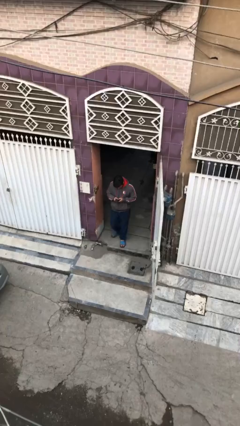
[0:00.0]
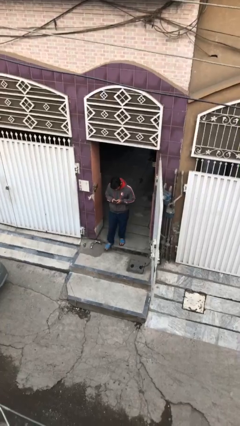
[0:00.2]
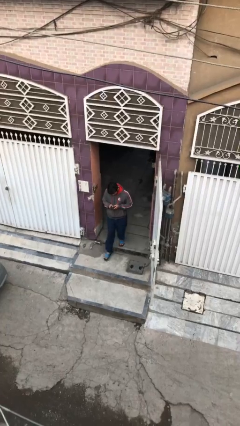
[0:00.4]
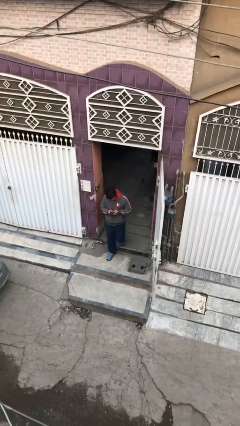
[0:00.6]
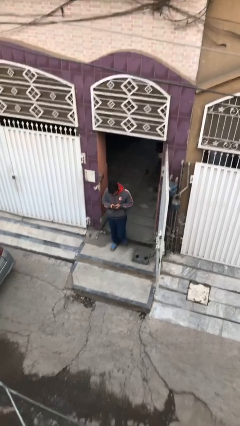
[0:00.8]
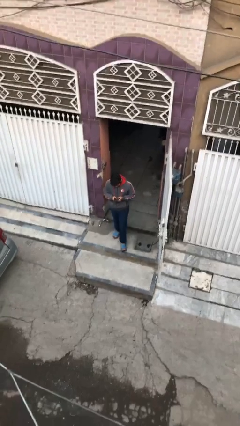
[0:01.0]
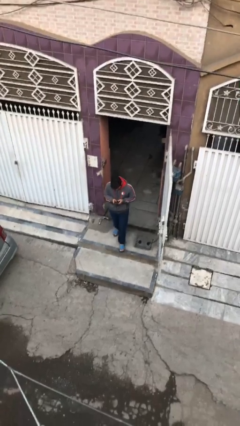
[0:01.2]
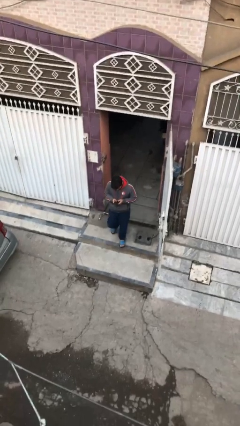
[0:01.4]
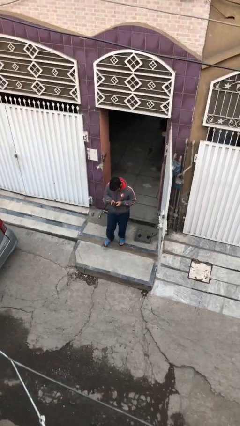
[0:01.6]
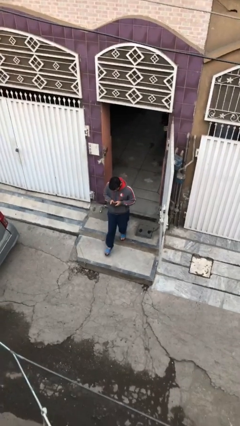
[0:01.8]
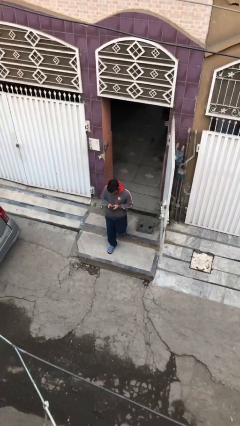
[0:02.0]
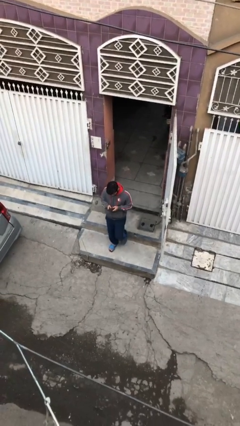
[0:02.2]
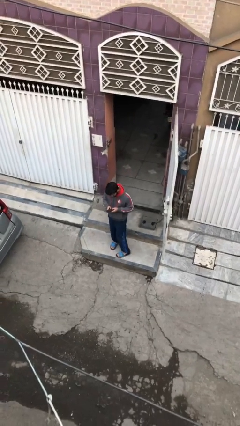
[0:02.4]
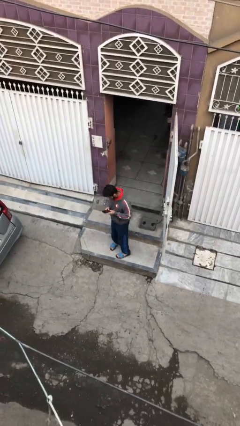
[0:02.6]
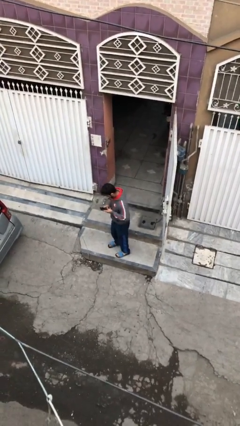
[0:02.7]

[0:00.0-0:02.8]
person enters scene through structure

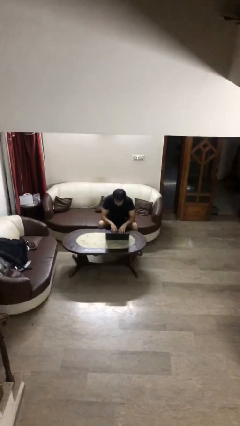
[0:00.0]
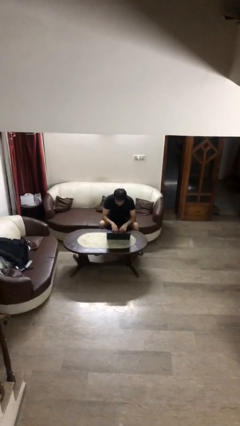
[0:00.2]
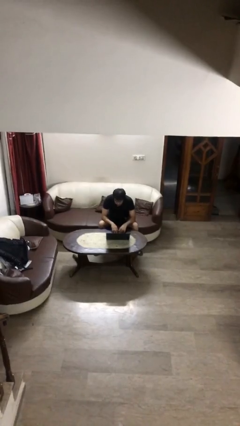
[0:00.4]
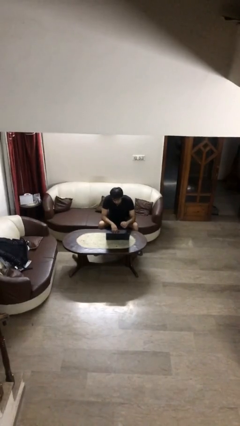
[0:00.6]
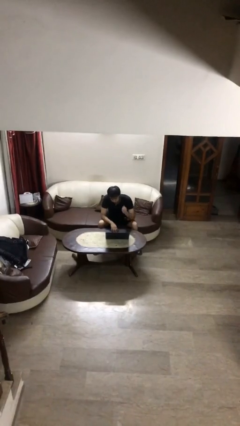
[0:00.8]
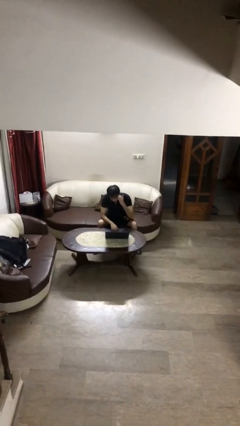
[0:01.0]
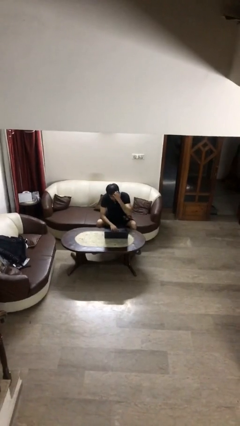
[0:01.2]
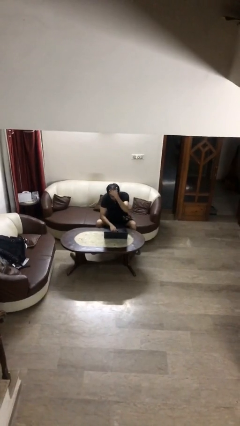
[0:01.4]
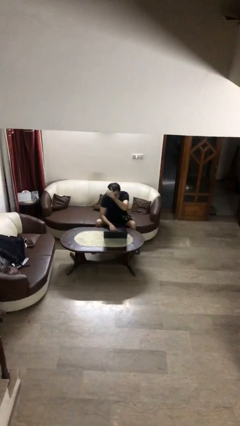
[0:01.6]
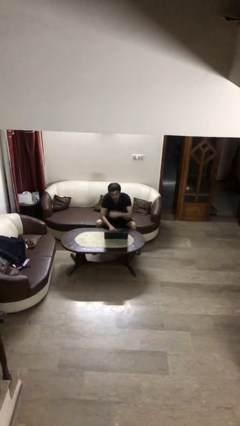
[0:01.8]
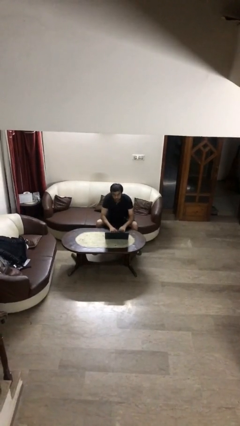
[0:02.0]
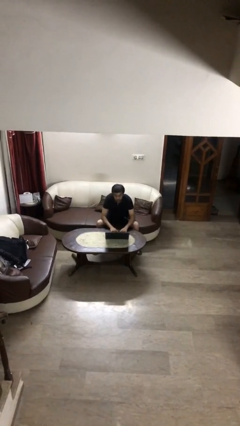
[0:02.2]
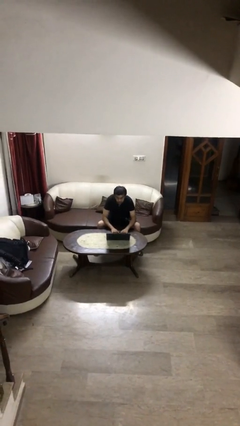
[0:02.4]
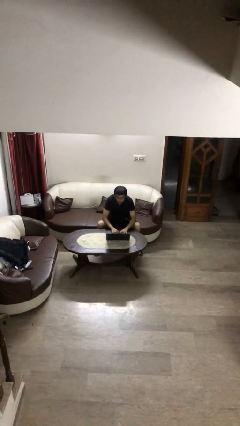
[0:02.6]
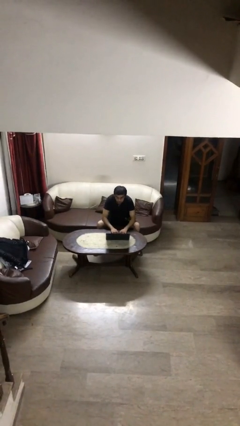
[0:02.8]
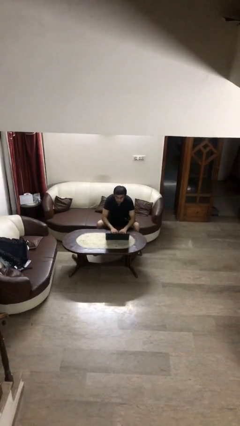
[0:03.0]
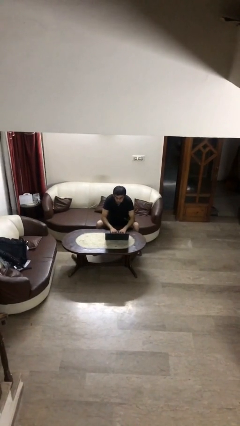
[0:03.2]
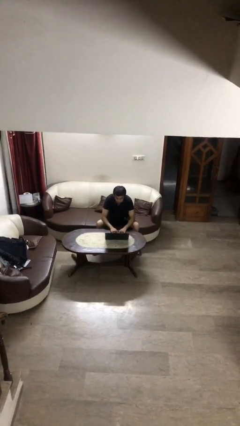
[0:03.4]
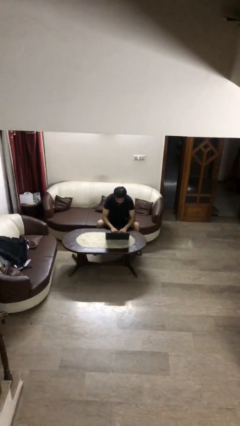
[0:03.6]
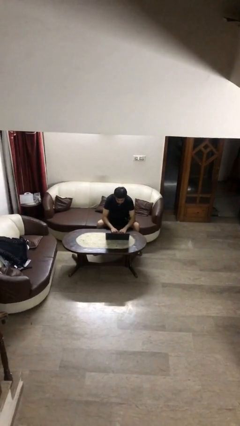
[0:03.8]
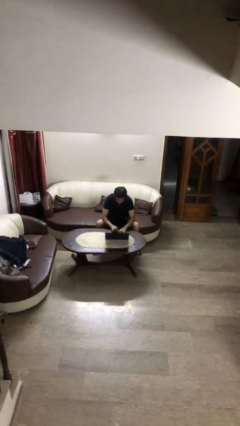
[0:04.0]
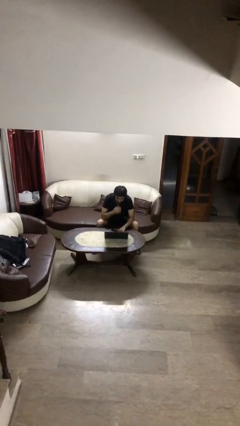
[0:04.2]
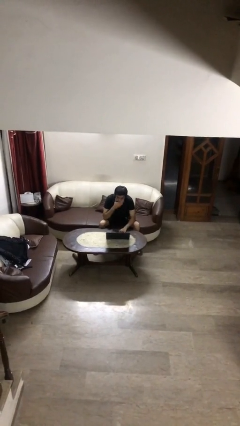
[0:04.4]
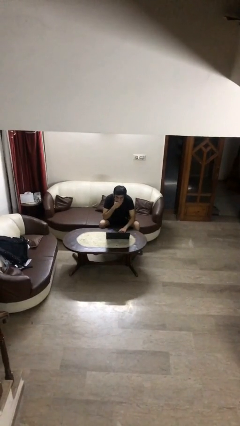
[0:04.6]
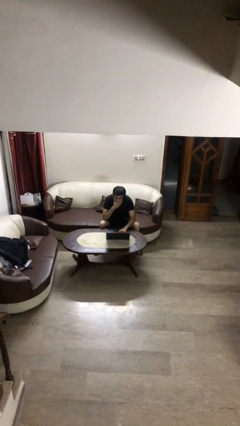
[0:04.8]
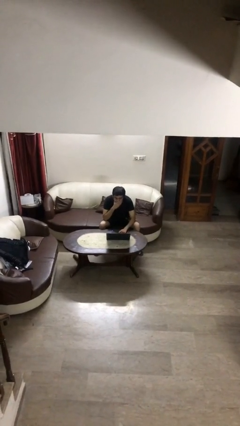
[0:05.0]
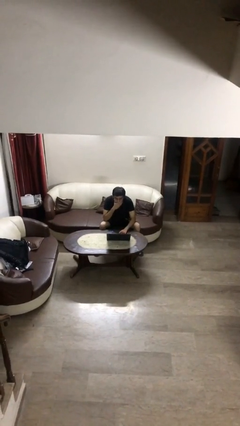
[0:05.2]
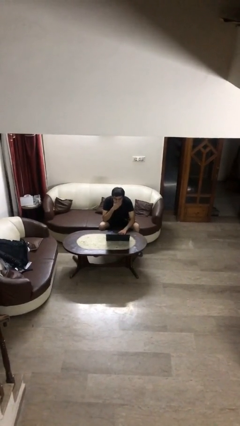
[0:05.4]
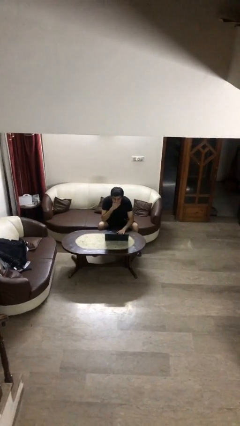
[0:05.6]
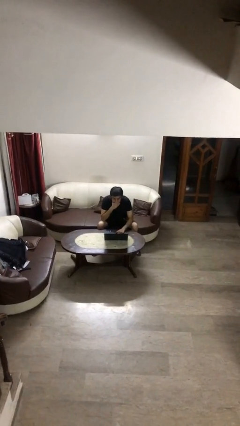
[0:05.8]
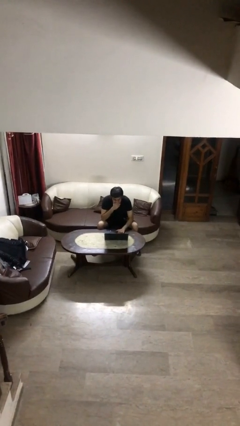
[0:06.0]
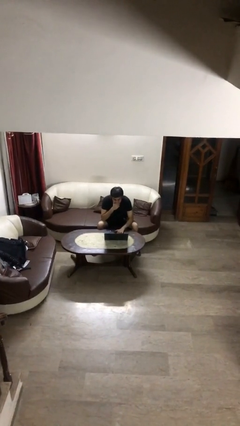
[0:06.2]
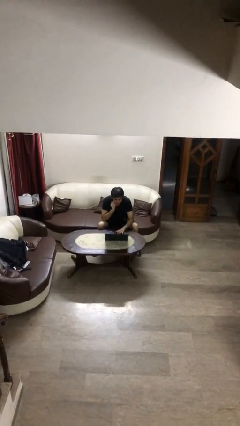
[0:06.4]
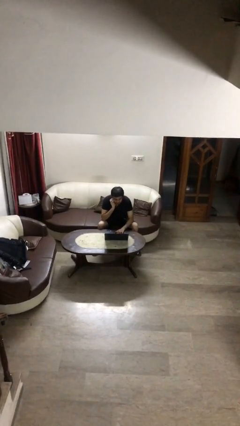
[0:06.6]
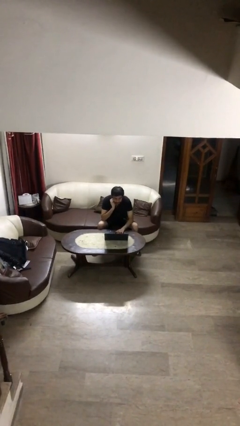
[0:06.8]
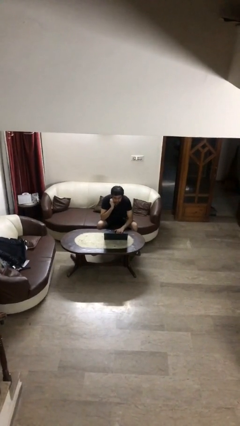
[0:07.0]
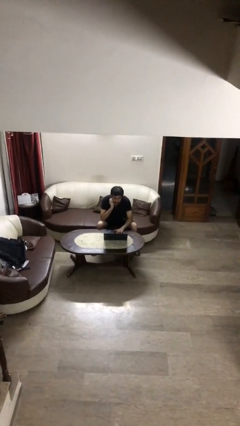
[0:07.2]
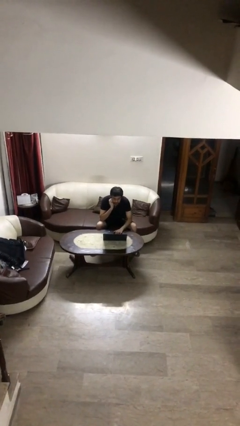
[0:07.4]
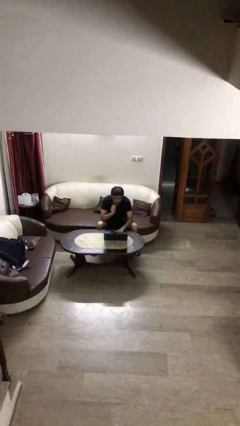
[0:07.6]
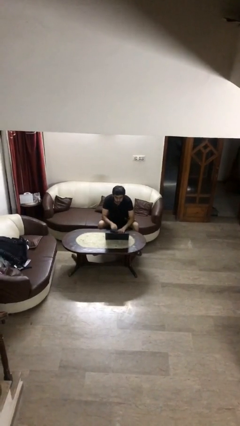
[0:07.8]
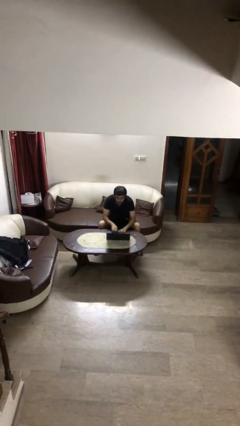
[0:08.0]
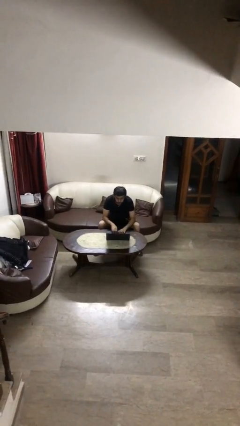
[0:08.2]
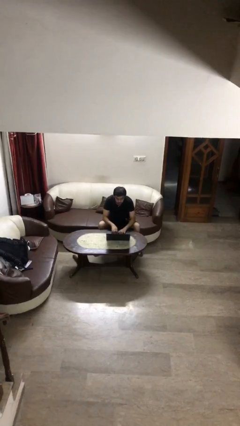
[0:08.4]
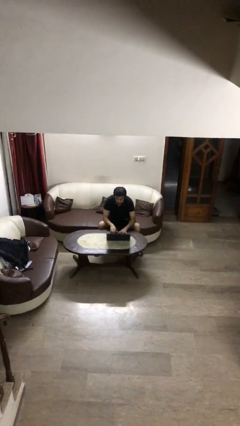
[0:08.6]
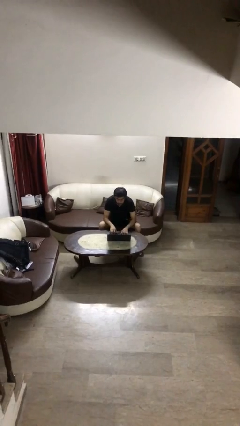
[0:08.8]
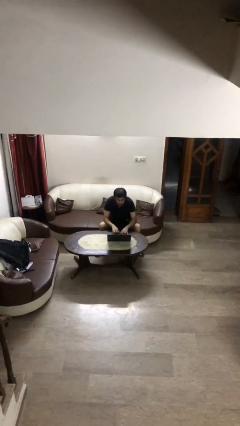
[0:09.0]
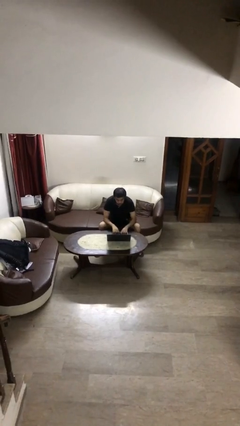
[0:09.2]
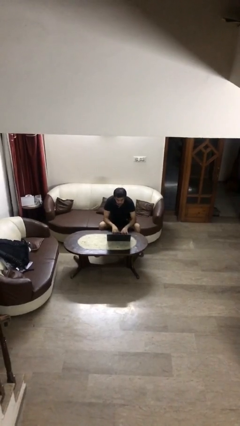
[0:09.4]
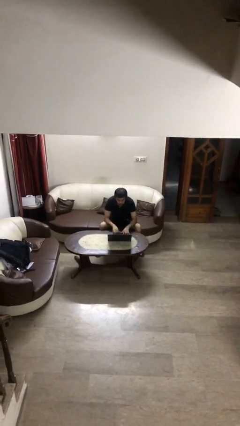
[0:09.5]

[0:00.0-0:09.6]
person interacts with laptop

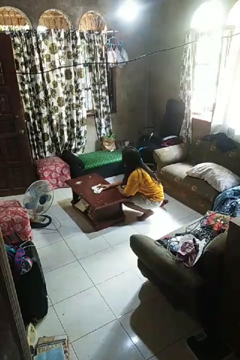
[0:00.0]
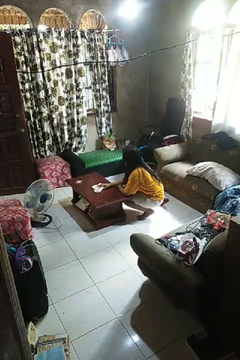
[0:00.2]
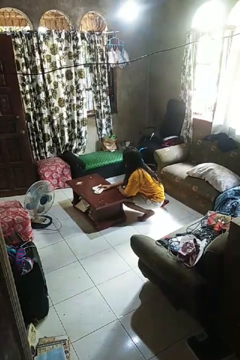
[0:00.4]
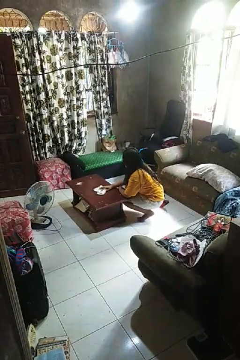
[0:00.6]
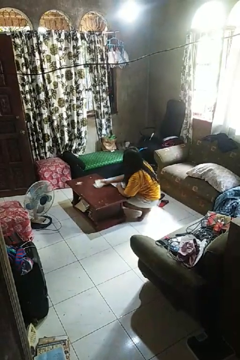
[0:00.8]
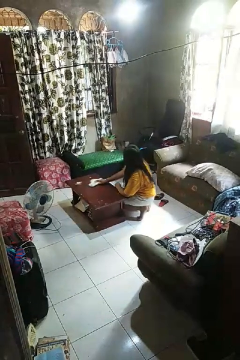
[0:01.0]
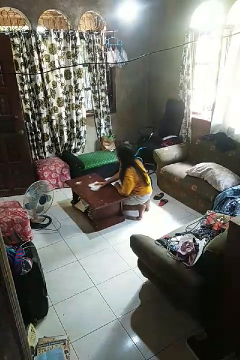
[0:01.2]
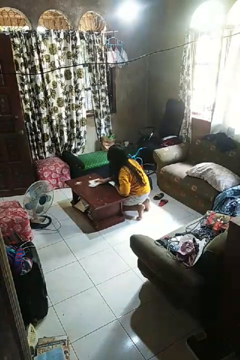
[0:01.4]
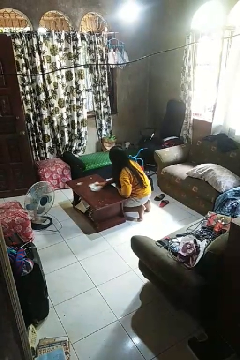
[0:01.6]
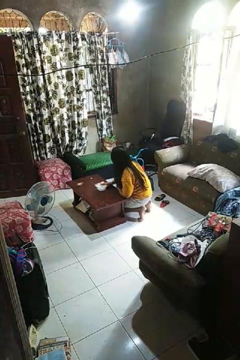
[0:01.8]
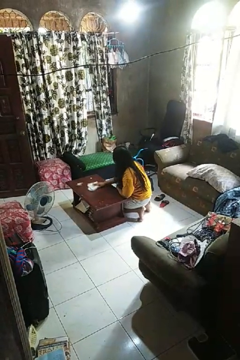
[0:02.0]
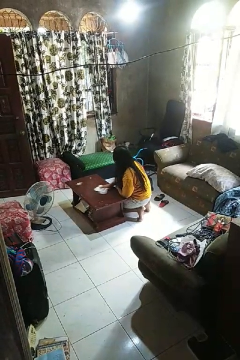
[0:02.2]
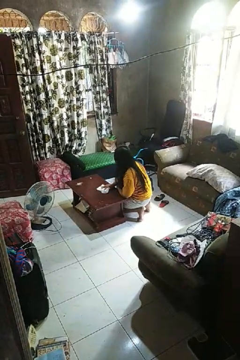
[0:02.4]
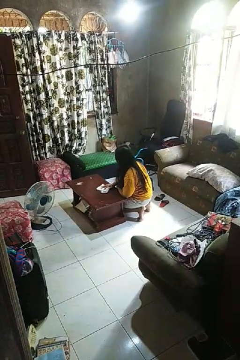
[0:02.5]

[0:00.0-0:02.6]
person cleans table with rag

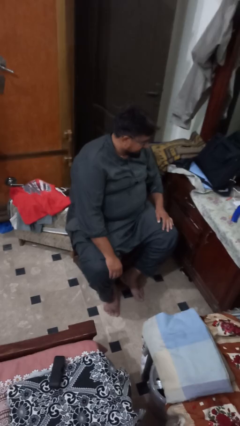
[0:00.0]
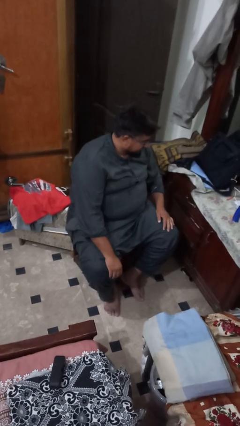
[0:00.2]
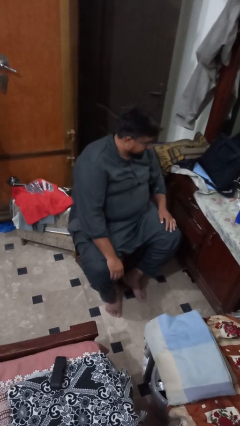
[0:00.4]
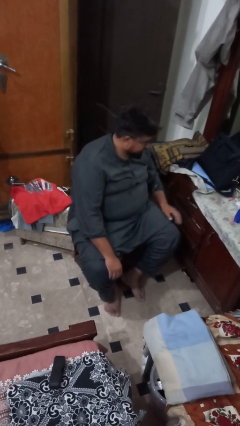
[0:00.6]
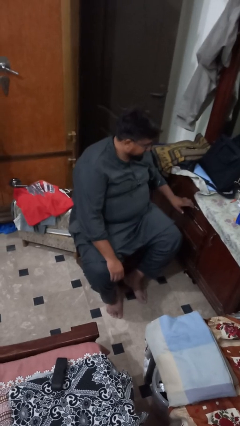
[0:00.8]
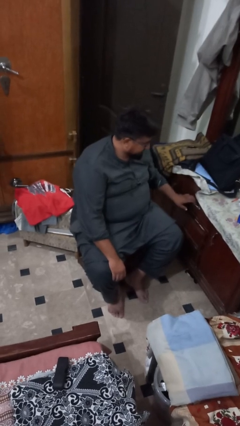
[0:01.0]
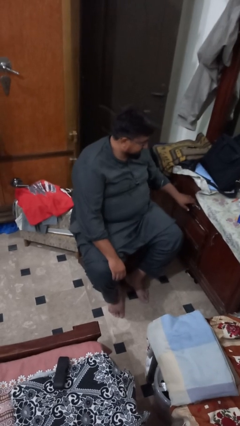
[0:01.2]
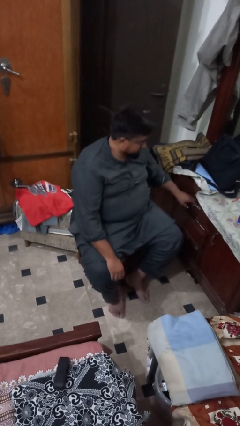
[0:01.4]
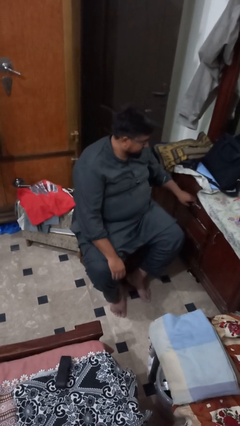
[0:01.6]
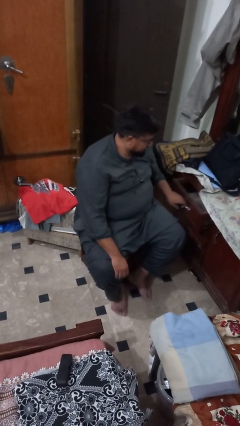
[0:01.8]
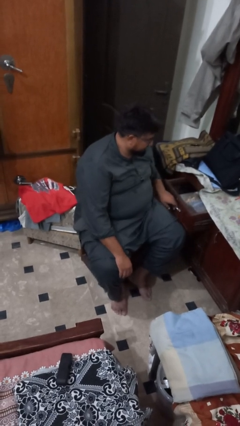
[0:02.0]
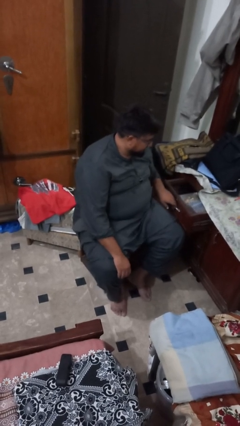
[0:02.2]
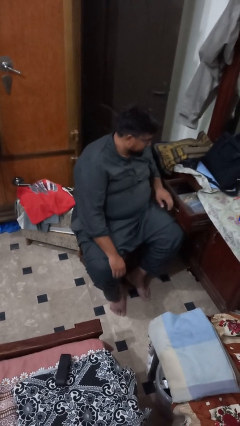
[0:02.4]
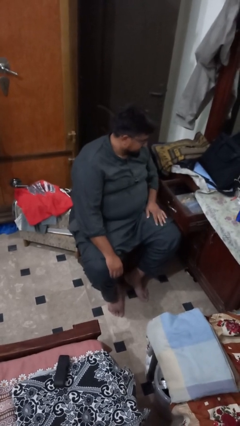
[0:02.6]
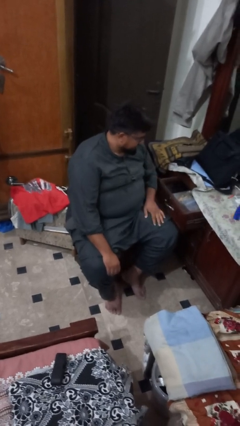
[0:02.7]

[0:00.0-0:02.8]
person opens dresser drawer
